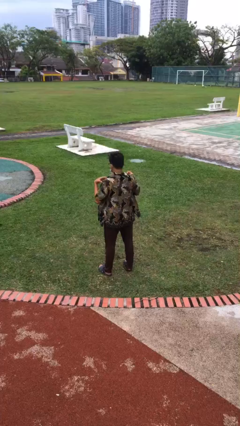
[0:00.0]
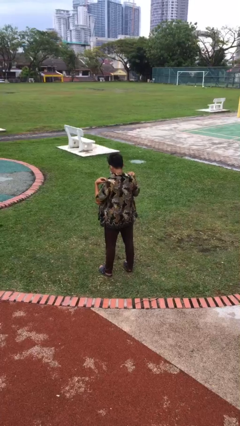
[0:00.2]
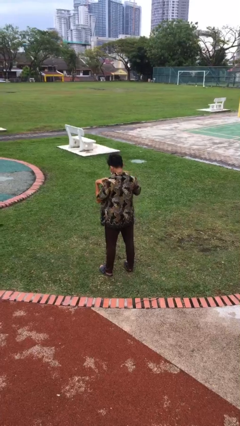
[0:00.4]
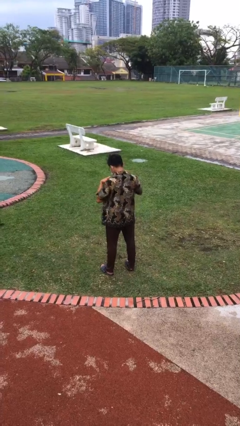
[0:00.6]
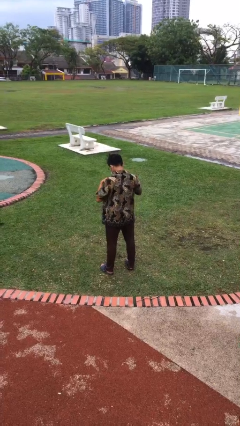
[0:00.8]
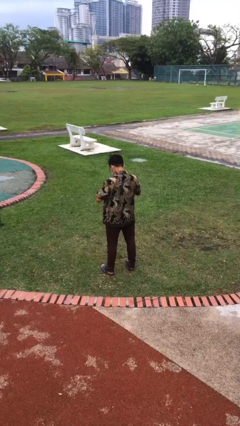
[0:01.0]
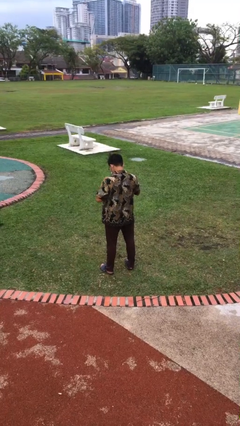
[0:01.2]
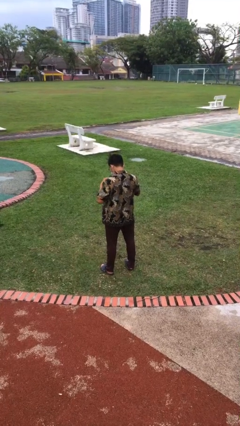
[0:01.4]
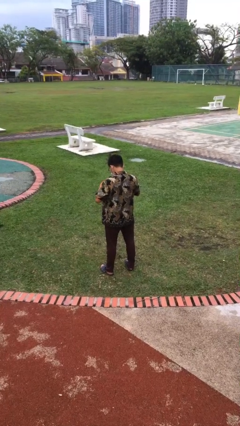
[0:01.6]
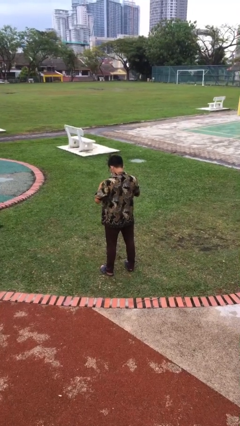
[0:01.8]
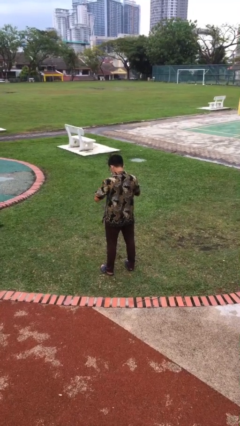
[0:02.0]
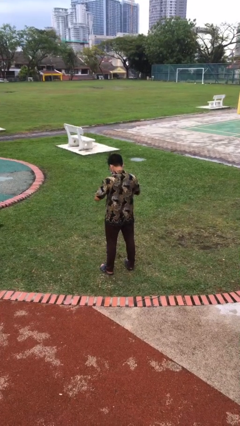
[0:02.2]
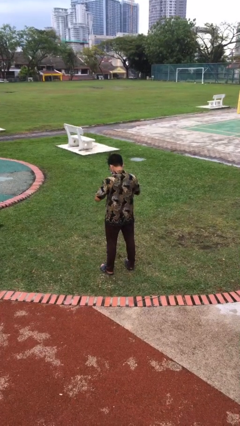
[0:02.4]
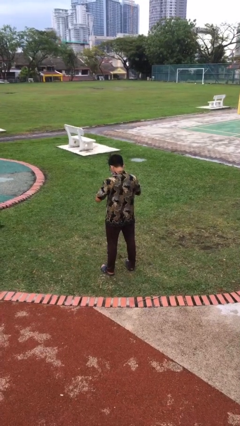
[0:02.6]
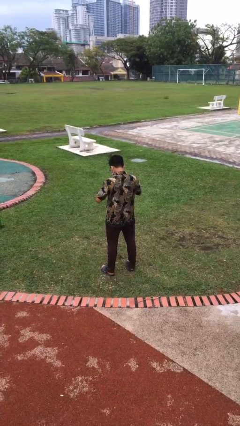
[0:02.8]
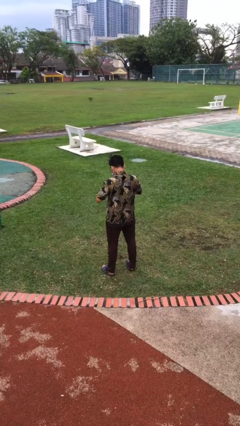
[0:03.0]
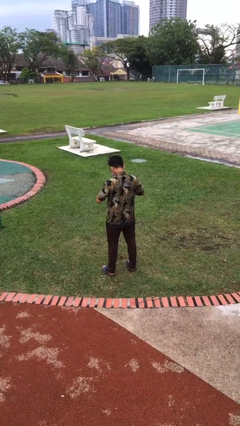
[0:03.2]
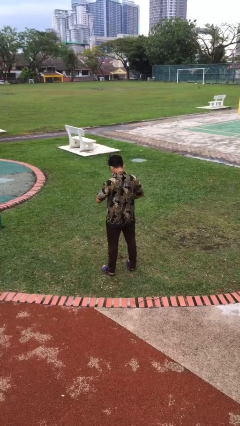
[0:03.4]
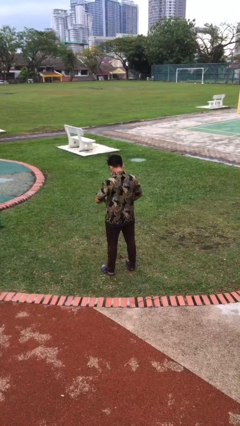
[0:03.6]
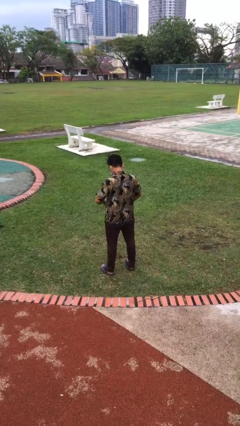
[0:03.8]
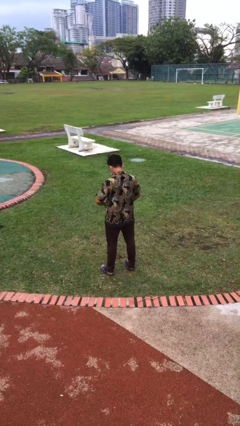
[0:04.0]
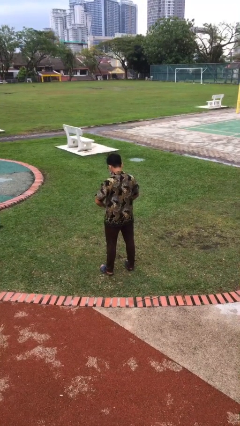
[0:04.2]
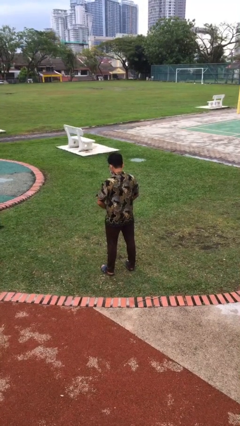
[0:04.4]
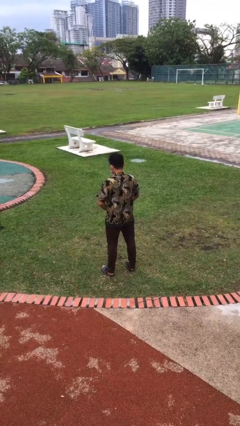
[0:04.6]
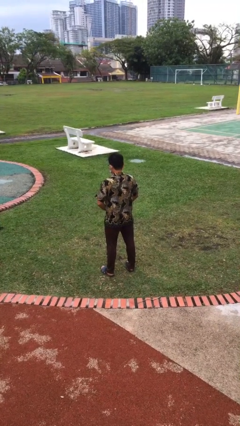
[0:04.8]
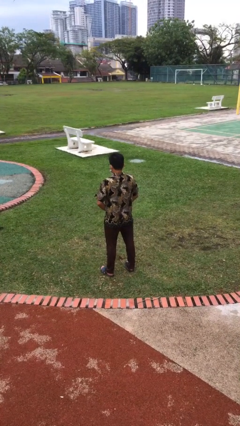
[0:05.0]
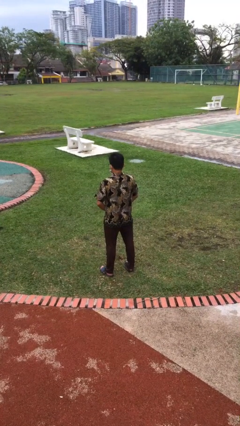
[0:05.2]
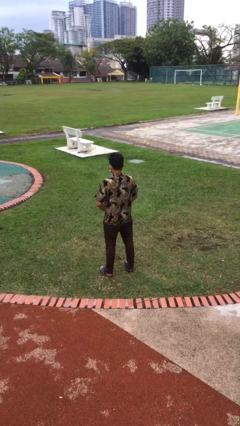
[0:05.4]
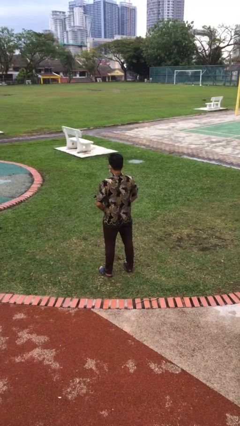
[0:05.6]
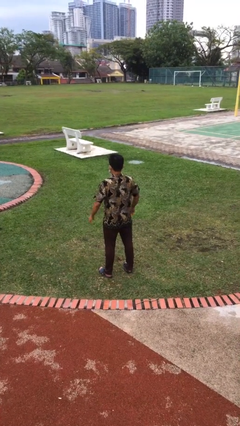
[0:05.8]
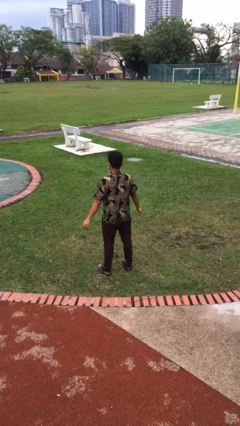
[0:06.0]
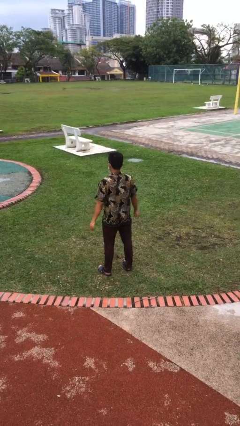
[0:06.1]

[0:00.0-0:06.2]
person buttons shirt

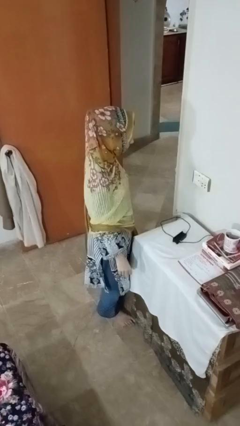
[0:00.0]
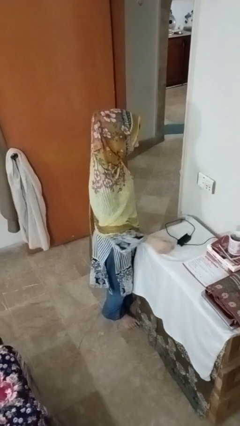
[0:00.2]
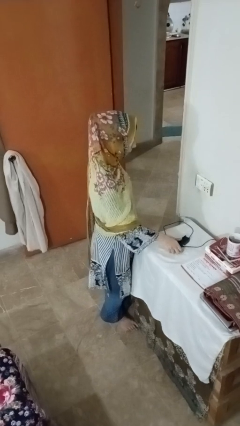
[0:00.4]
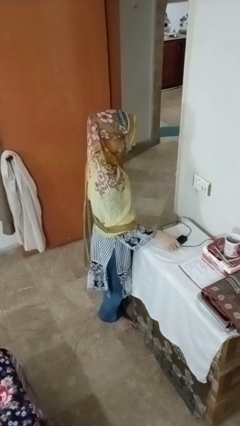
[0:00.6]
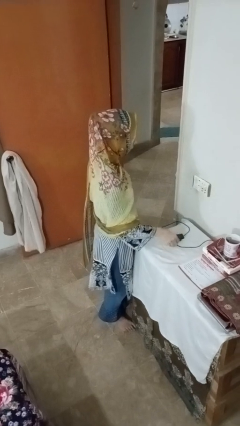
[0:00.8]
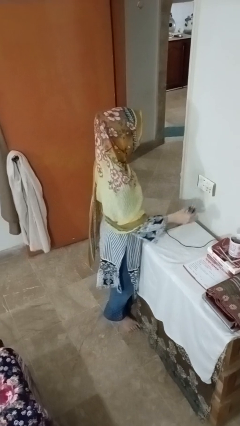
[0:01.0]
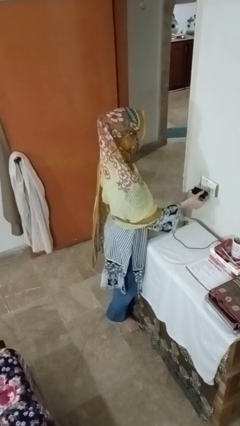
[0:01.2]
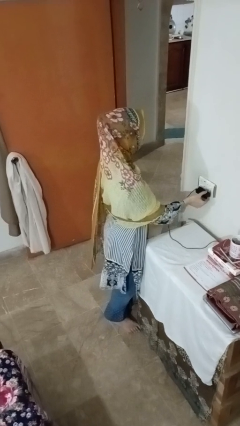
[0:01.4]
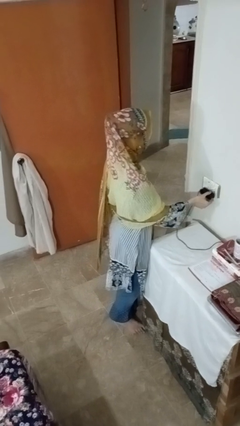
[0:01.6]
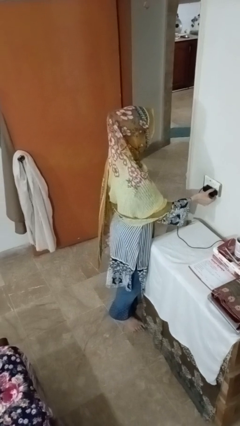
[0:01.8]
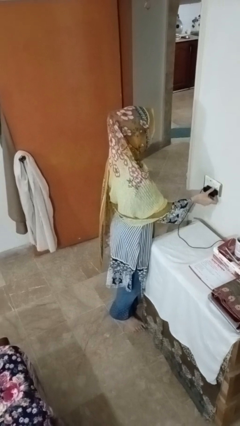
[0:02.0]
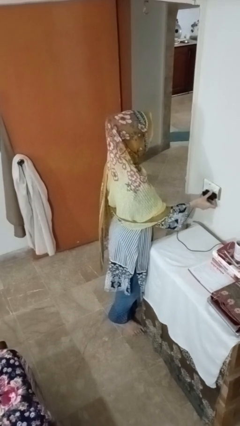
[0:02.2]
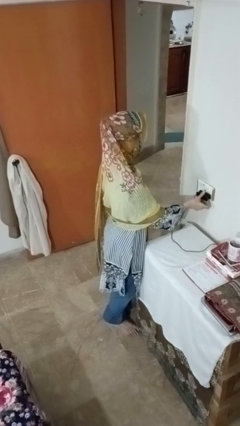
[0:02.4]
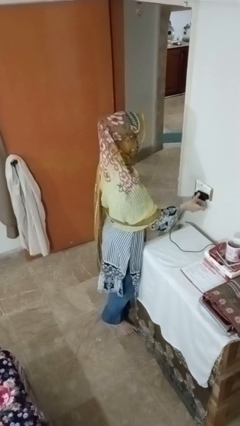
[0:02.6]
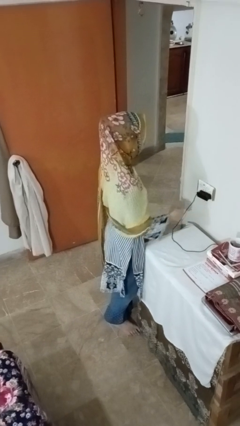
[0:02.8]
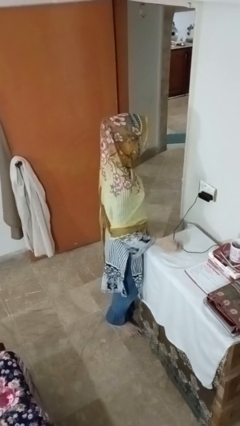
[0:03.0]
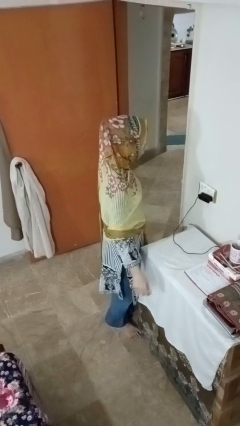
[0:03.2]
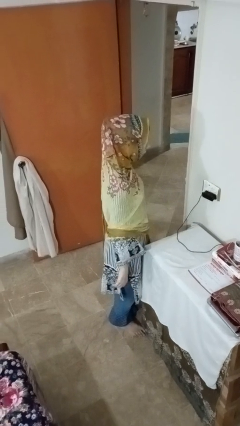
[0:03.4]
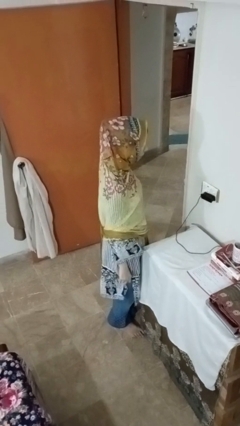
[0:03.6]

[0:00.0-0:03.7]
person plugs into electrical socket

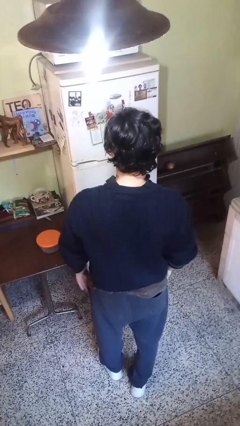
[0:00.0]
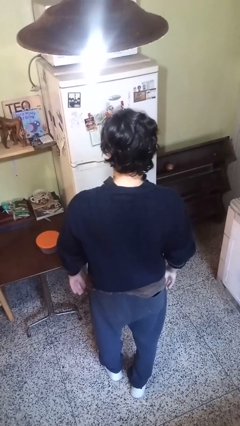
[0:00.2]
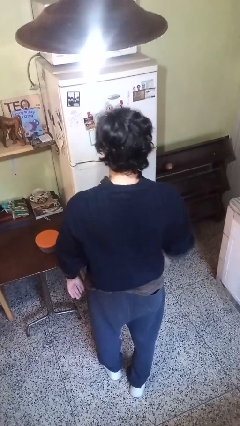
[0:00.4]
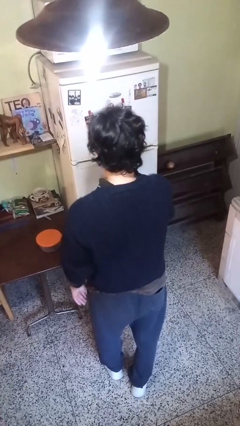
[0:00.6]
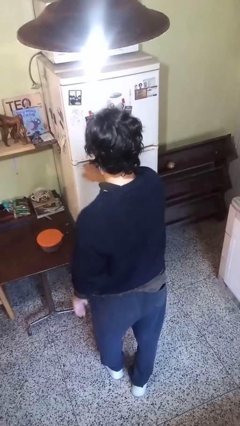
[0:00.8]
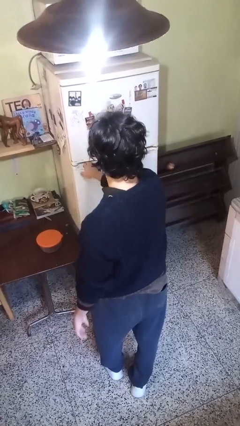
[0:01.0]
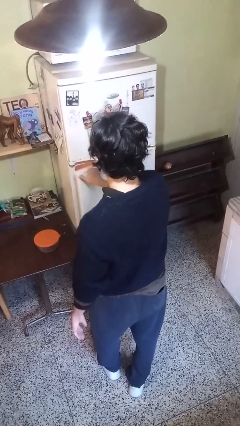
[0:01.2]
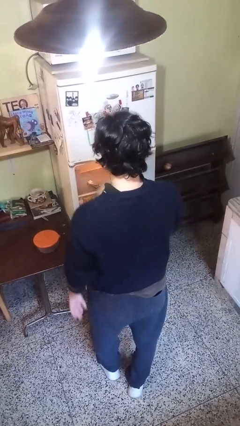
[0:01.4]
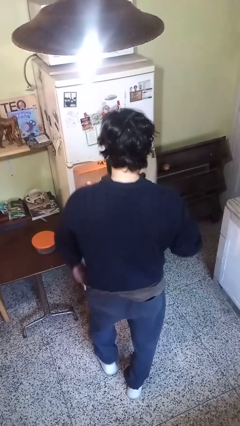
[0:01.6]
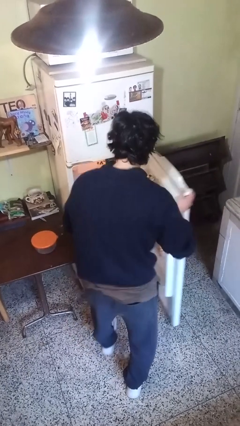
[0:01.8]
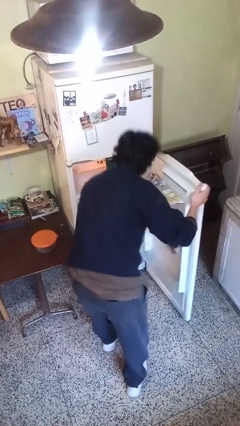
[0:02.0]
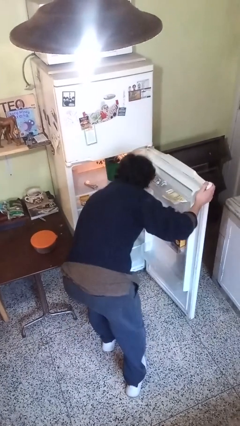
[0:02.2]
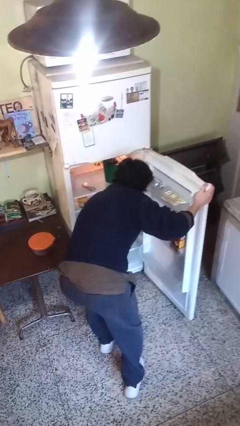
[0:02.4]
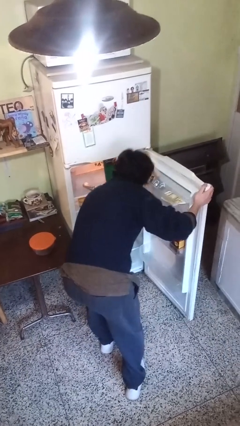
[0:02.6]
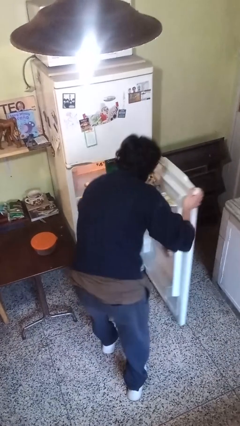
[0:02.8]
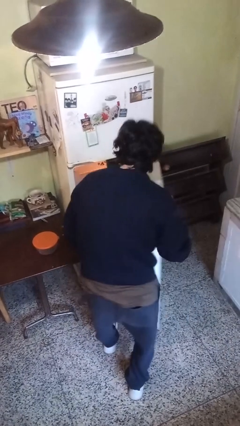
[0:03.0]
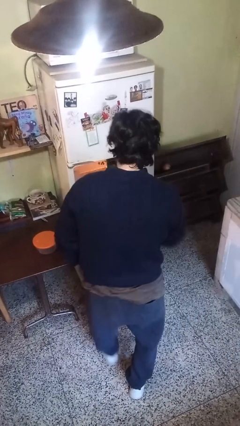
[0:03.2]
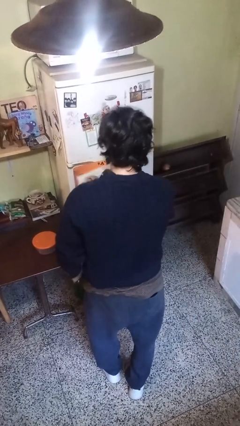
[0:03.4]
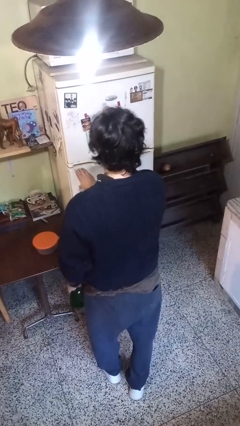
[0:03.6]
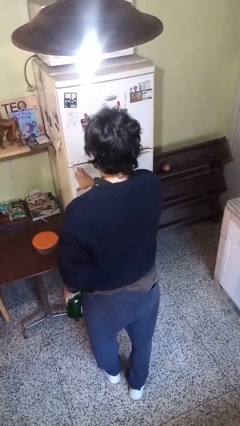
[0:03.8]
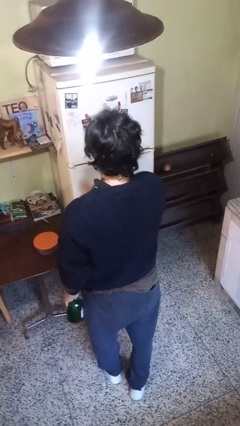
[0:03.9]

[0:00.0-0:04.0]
person takes object from refrigerator

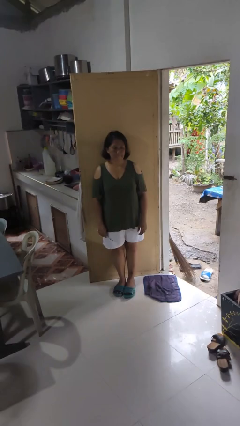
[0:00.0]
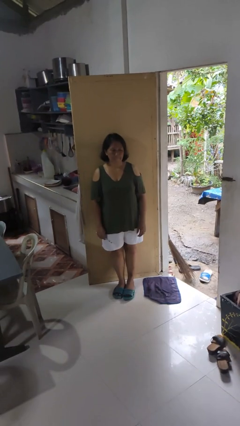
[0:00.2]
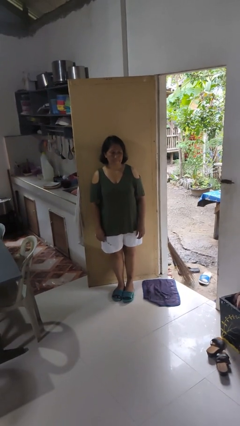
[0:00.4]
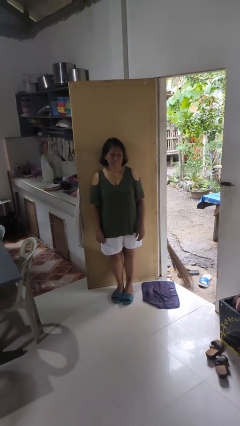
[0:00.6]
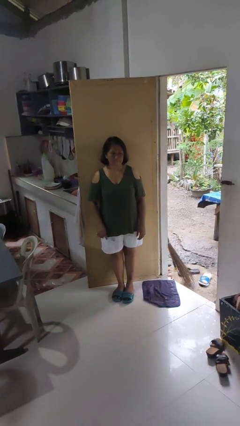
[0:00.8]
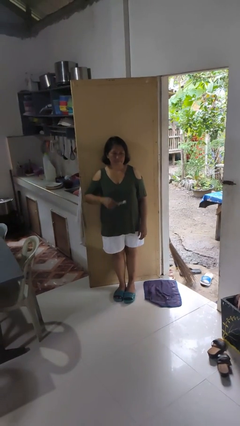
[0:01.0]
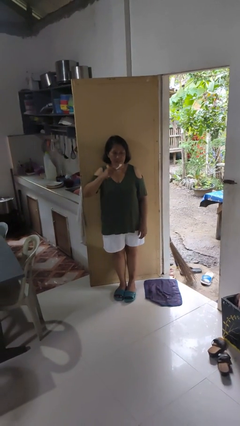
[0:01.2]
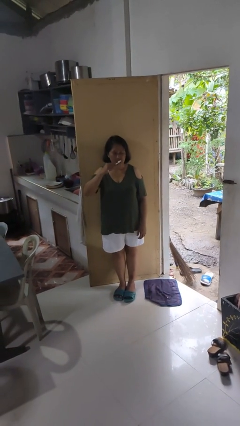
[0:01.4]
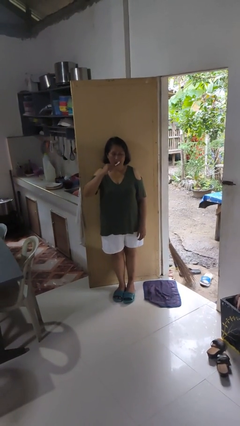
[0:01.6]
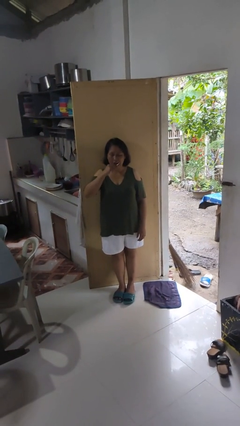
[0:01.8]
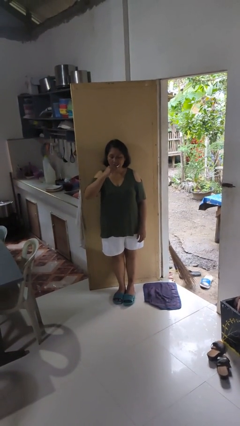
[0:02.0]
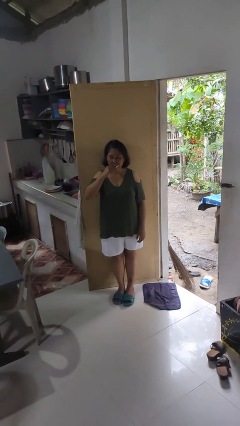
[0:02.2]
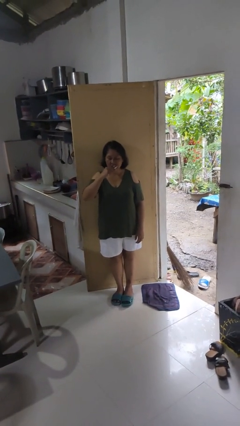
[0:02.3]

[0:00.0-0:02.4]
person brushes teeth

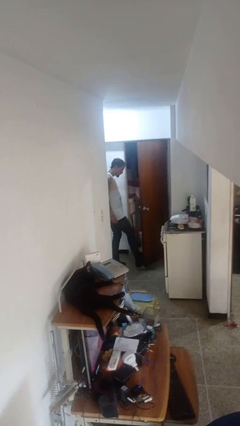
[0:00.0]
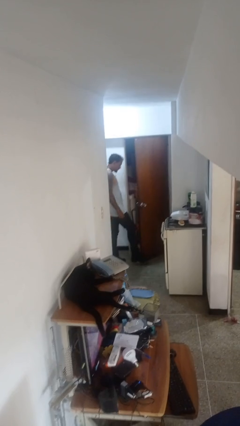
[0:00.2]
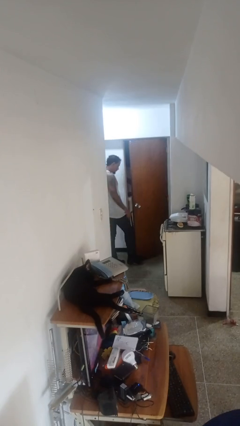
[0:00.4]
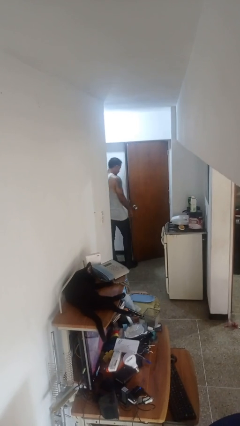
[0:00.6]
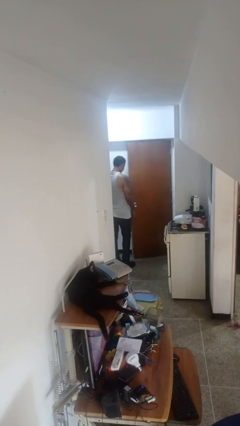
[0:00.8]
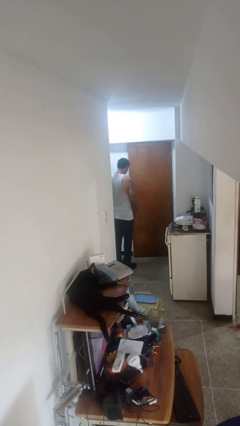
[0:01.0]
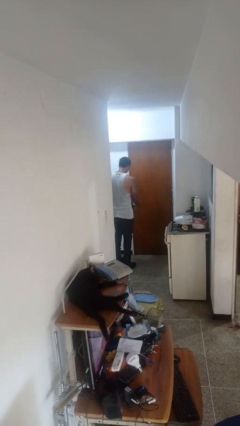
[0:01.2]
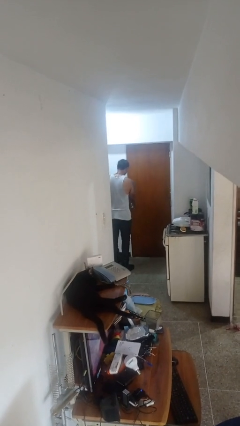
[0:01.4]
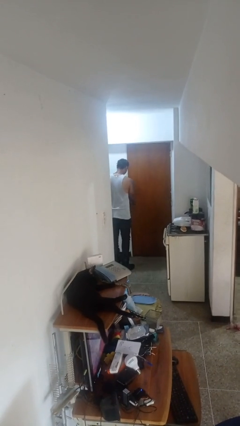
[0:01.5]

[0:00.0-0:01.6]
person closes door with foot
